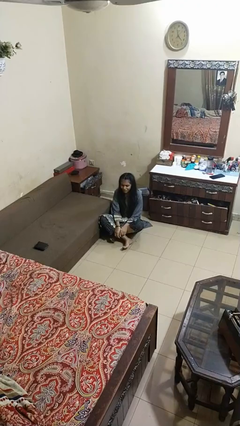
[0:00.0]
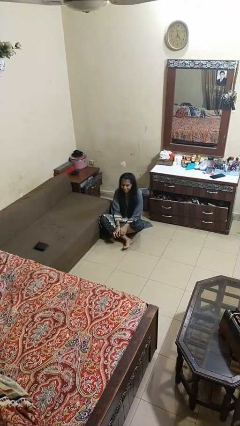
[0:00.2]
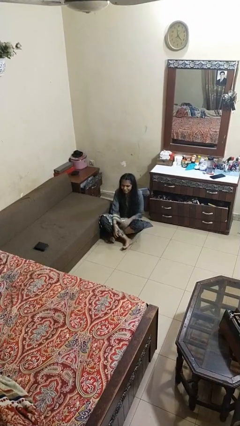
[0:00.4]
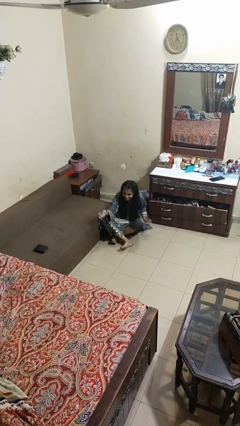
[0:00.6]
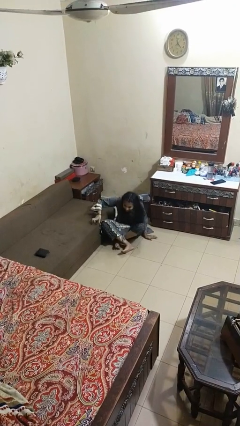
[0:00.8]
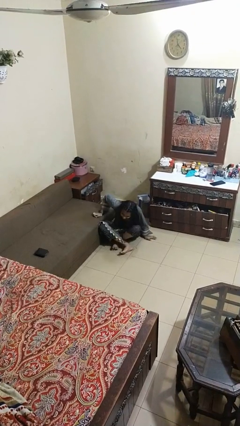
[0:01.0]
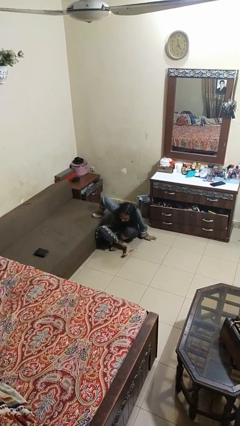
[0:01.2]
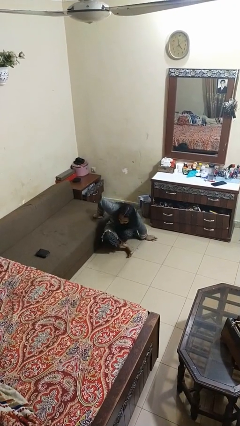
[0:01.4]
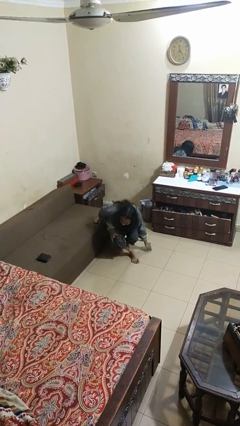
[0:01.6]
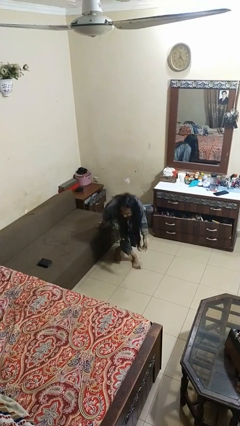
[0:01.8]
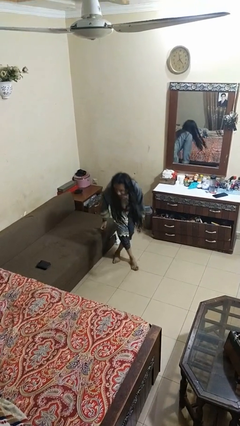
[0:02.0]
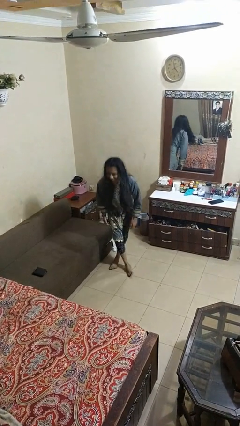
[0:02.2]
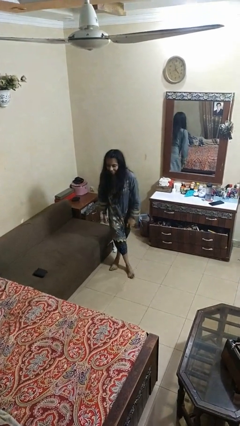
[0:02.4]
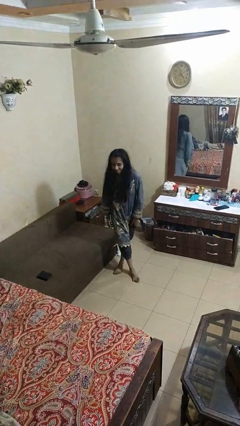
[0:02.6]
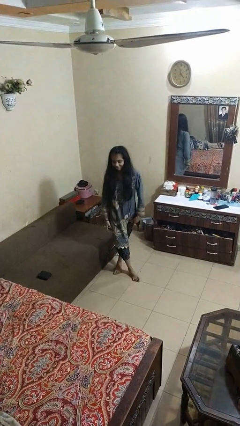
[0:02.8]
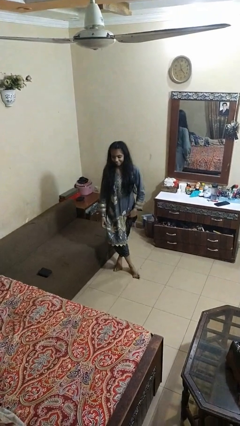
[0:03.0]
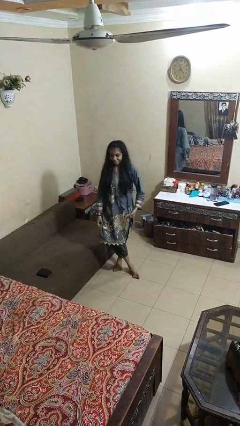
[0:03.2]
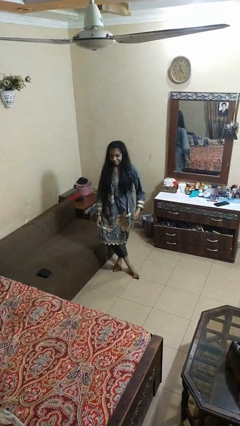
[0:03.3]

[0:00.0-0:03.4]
person stands up from floor

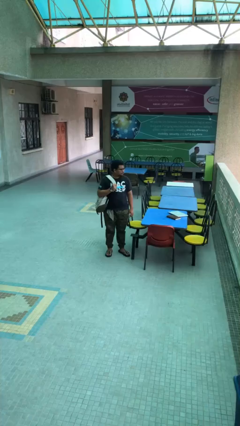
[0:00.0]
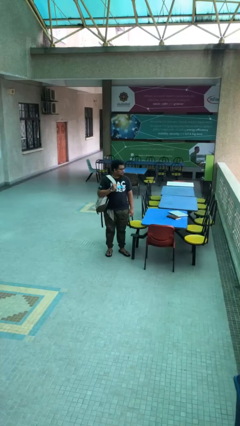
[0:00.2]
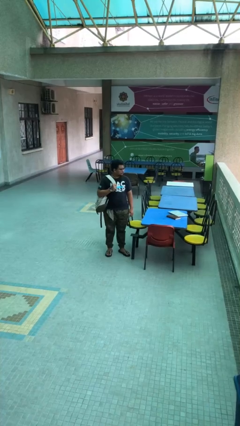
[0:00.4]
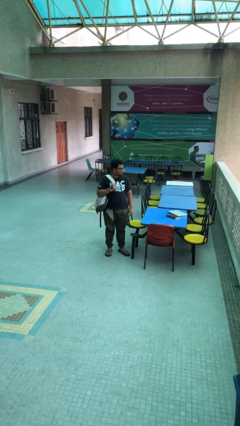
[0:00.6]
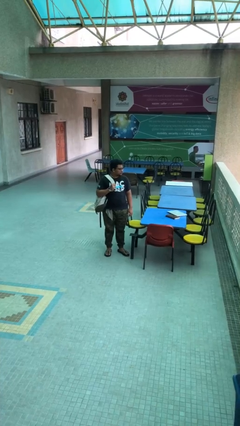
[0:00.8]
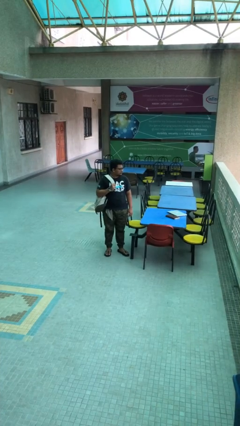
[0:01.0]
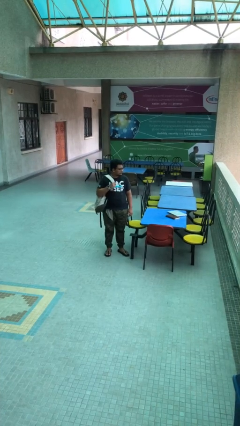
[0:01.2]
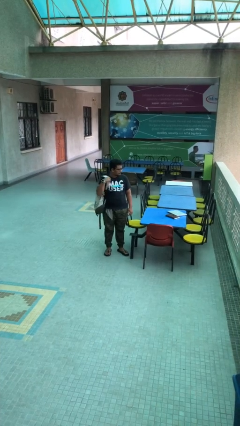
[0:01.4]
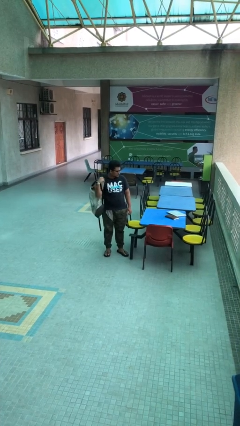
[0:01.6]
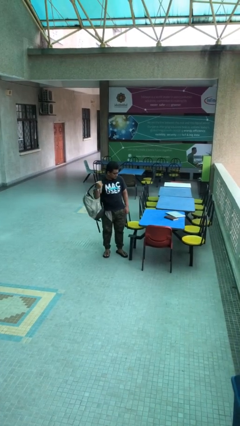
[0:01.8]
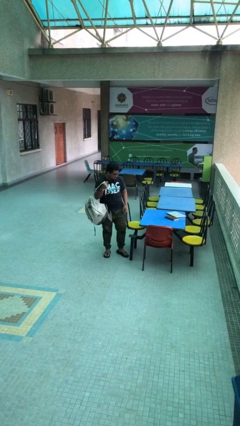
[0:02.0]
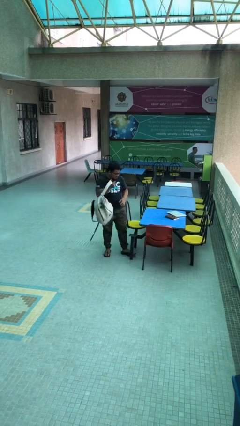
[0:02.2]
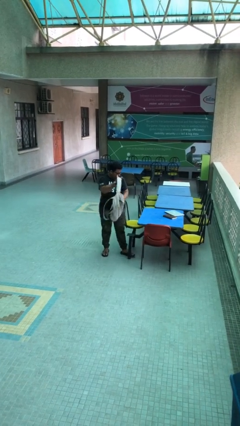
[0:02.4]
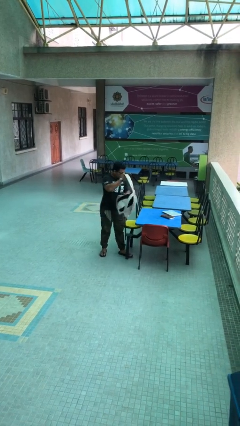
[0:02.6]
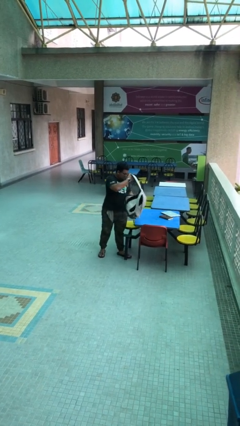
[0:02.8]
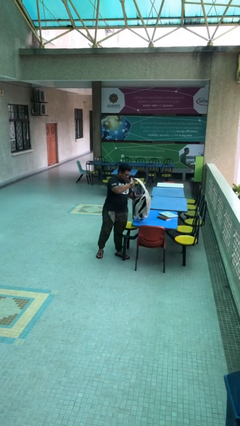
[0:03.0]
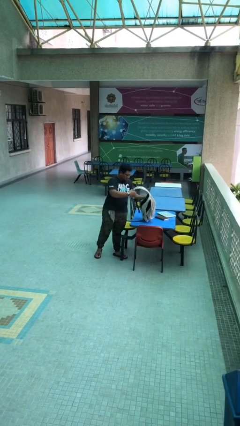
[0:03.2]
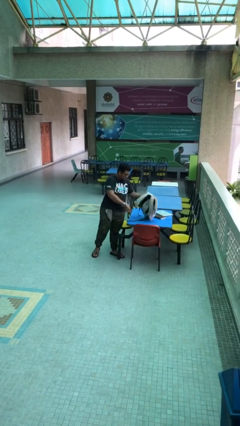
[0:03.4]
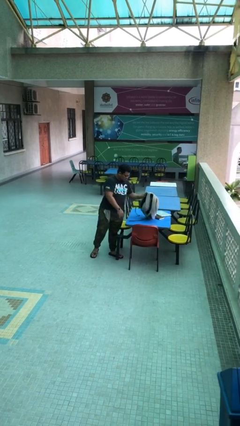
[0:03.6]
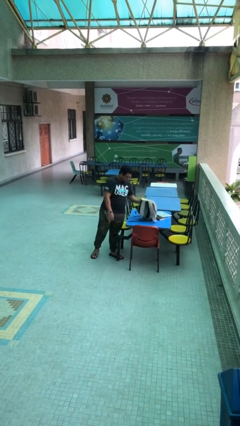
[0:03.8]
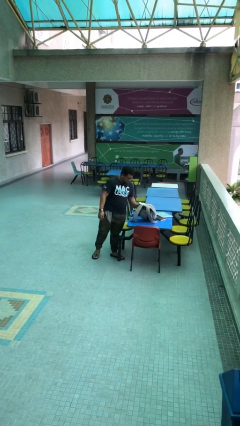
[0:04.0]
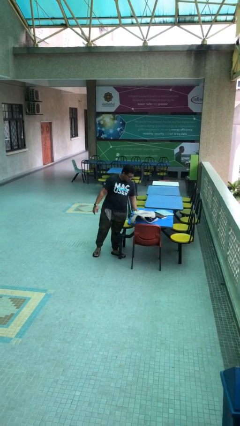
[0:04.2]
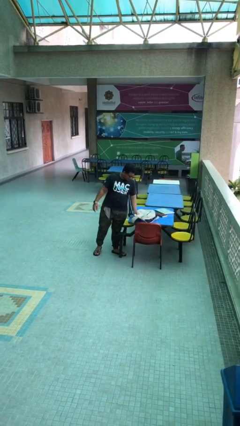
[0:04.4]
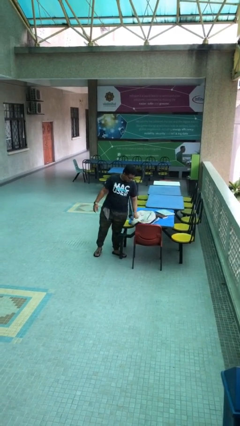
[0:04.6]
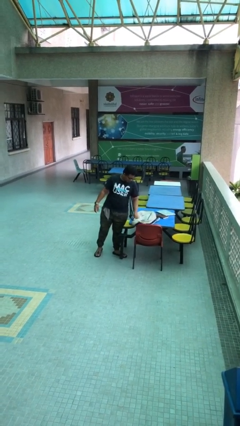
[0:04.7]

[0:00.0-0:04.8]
person puts down object on table

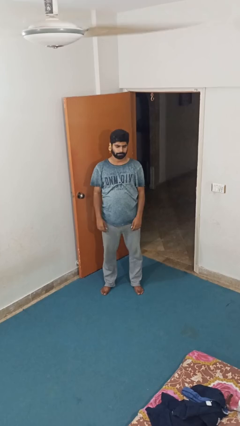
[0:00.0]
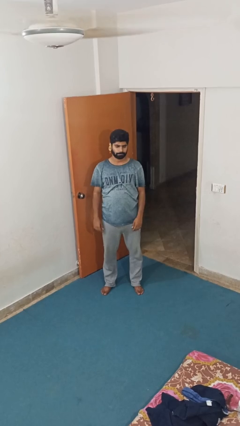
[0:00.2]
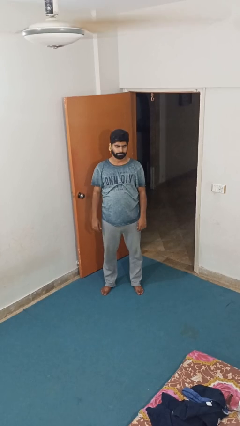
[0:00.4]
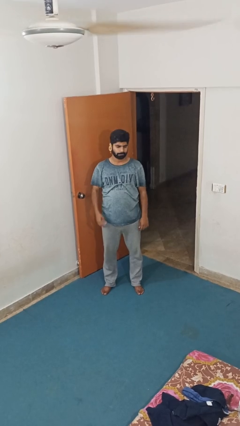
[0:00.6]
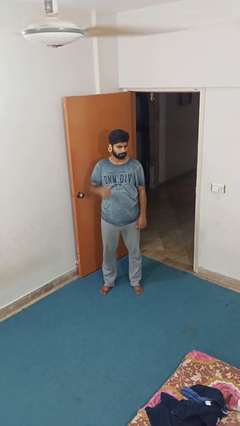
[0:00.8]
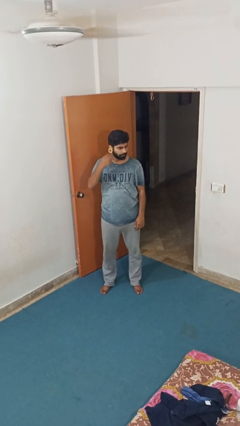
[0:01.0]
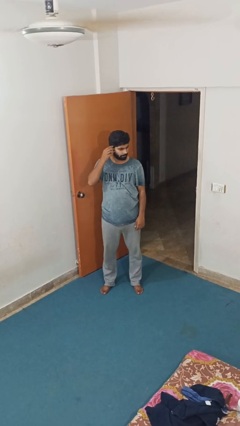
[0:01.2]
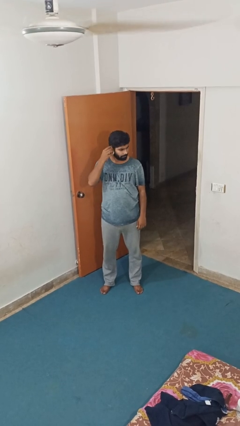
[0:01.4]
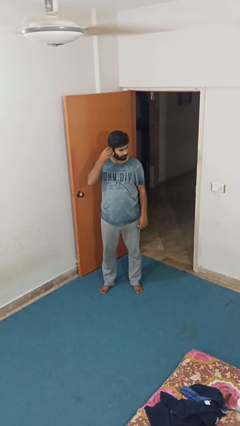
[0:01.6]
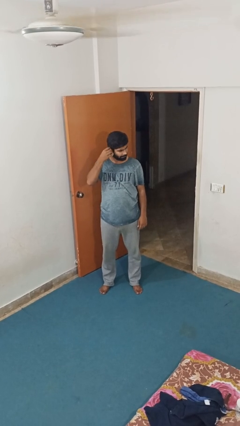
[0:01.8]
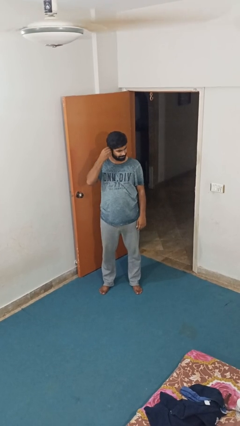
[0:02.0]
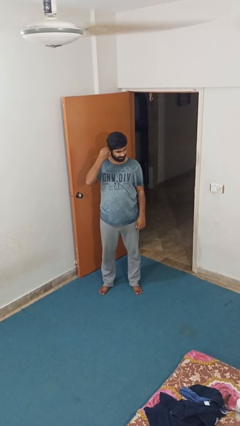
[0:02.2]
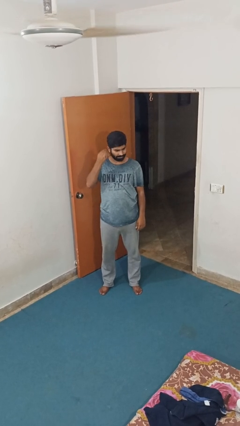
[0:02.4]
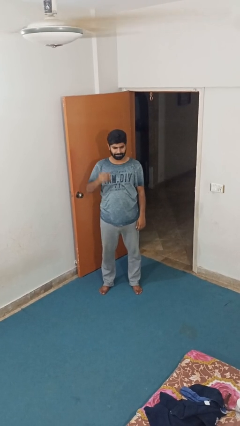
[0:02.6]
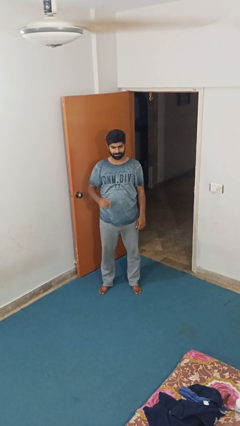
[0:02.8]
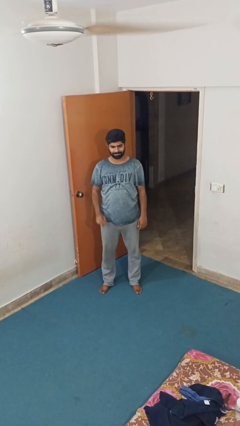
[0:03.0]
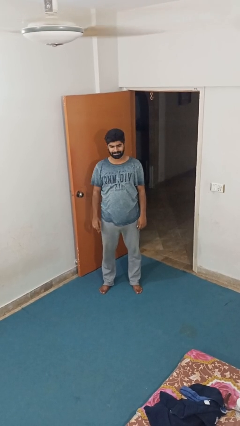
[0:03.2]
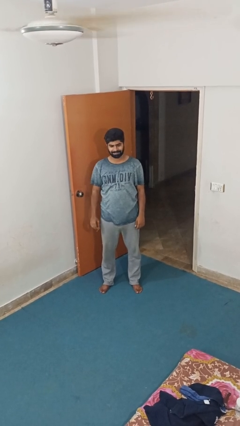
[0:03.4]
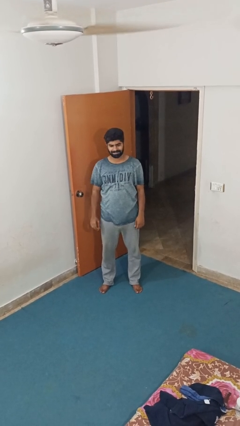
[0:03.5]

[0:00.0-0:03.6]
person takes off earrings

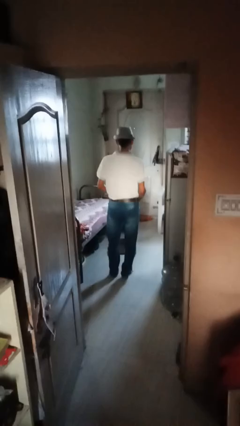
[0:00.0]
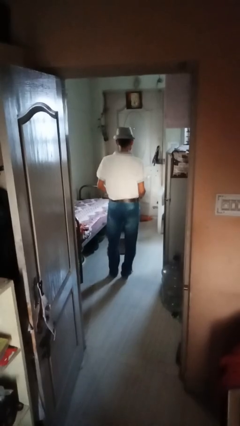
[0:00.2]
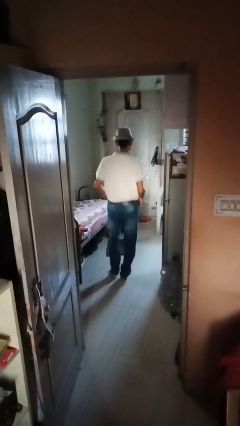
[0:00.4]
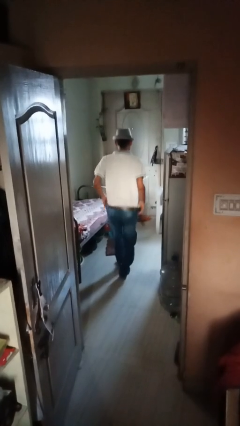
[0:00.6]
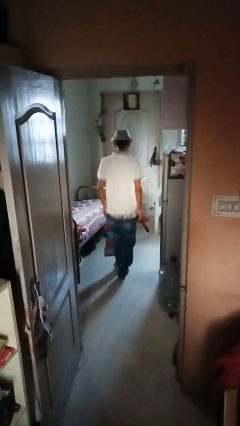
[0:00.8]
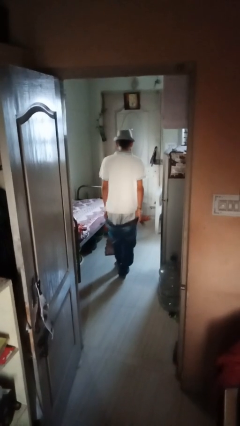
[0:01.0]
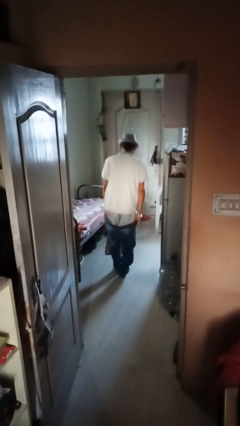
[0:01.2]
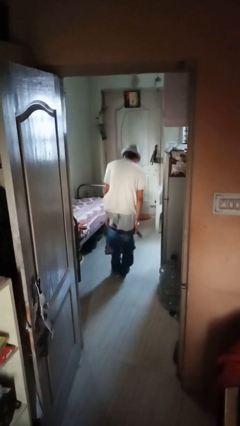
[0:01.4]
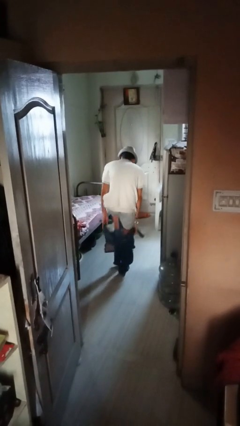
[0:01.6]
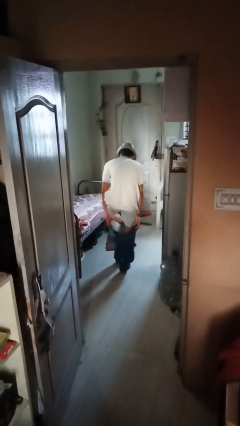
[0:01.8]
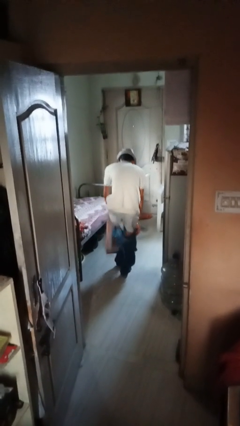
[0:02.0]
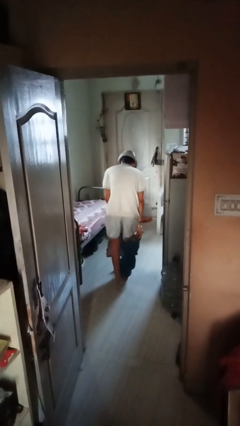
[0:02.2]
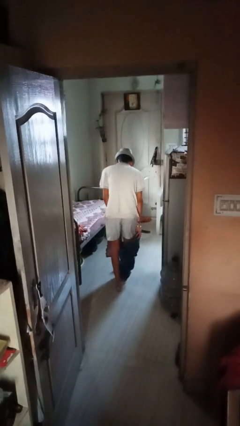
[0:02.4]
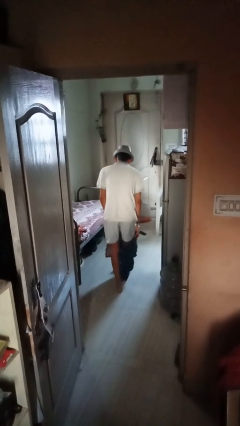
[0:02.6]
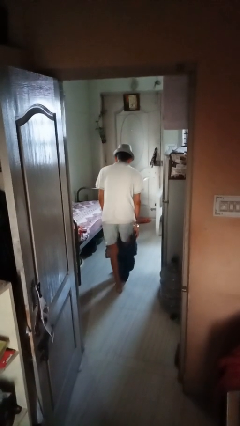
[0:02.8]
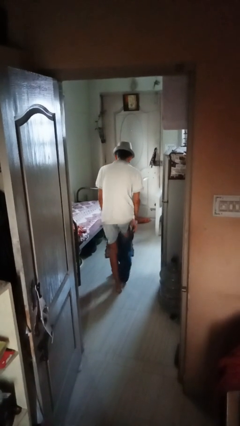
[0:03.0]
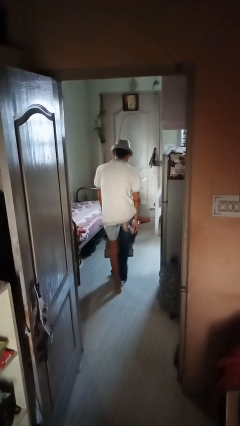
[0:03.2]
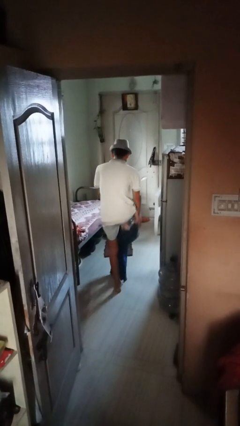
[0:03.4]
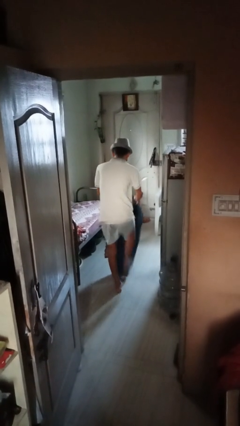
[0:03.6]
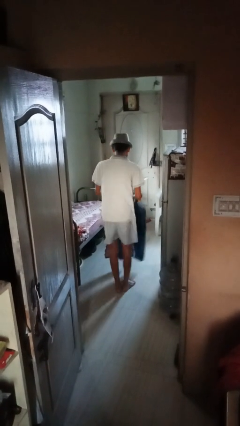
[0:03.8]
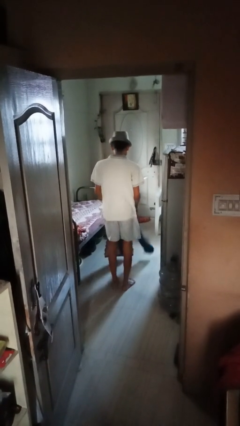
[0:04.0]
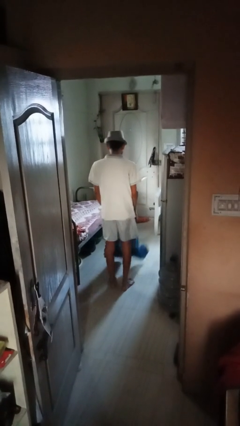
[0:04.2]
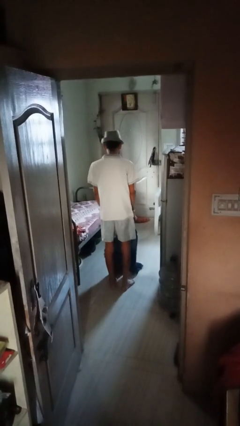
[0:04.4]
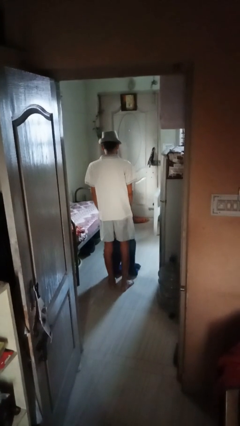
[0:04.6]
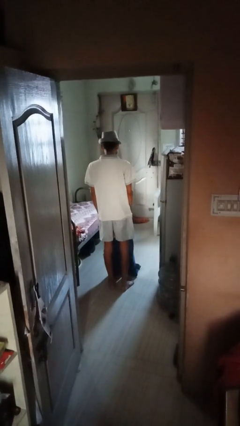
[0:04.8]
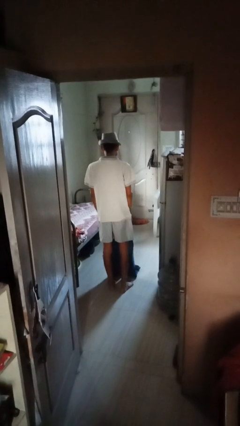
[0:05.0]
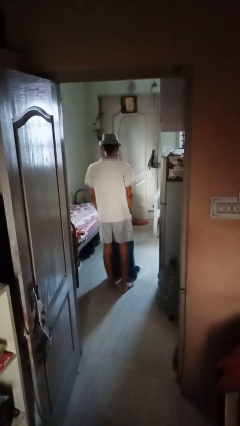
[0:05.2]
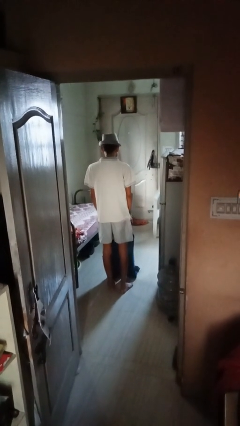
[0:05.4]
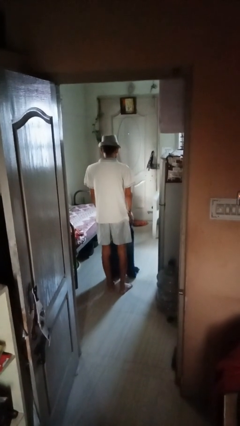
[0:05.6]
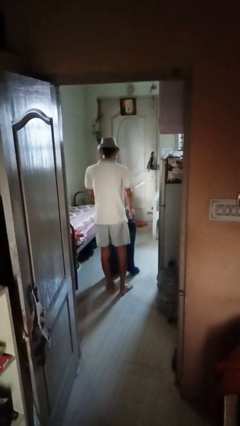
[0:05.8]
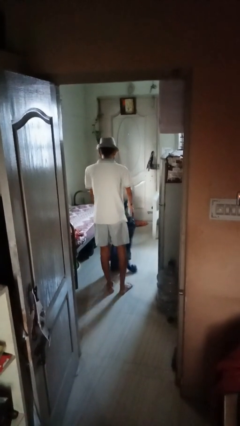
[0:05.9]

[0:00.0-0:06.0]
person takes off pants
